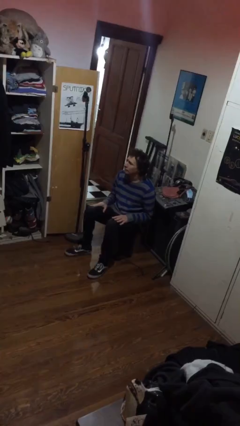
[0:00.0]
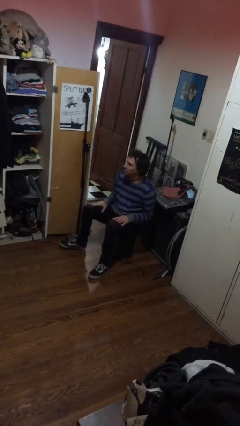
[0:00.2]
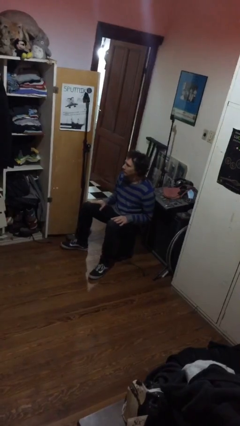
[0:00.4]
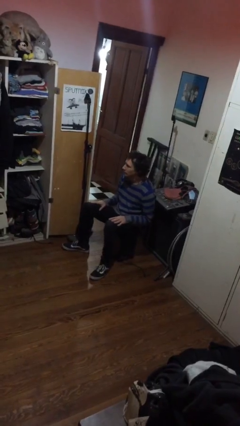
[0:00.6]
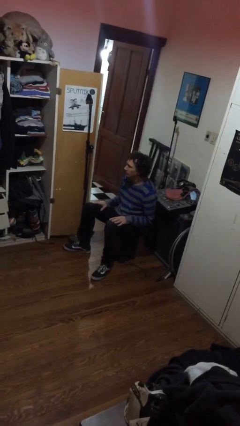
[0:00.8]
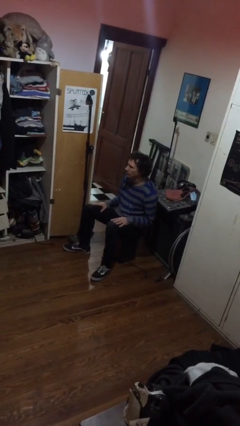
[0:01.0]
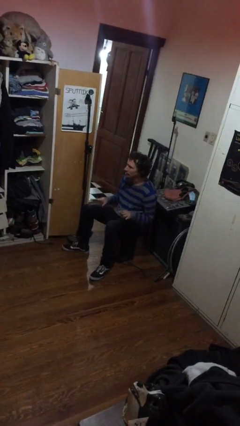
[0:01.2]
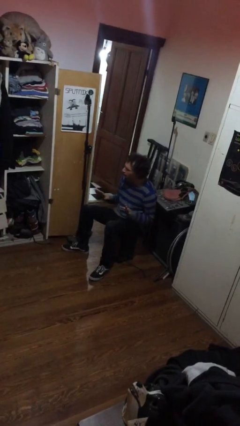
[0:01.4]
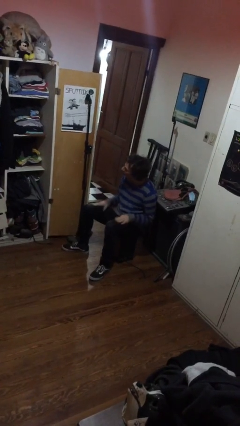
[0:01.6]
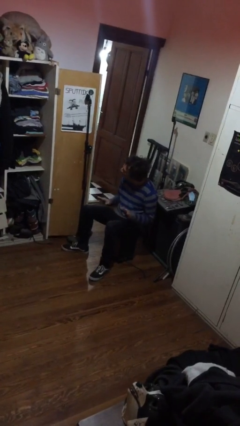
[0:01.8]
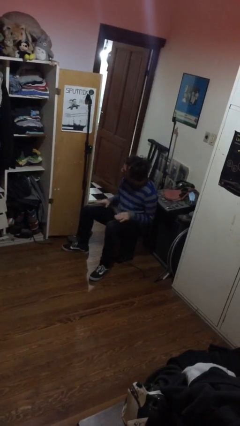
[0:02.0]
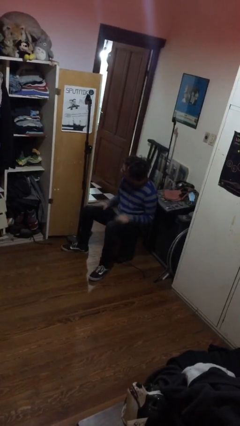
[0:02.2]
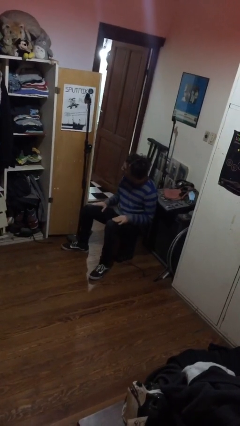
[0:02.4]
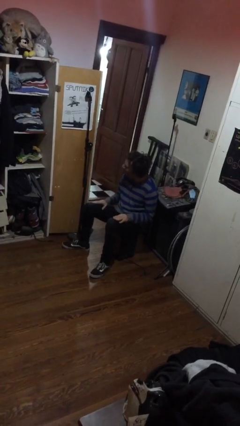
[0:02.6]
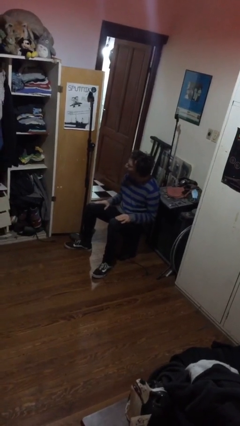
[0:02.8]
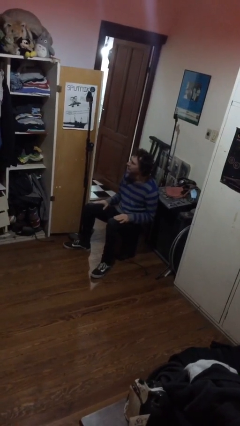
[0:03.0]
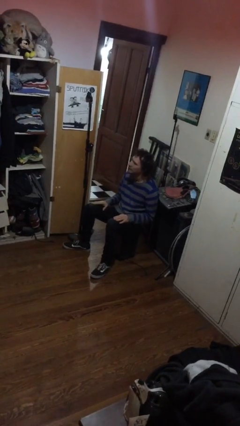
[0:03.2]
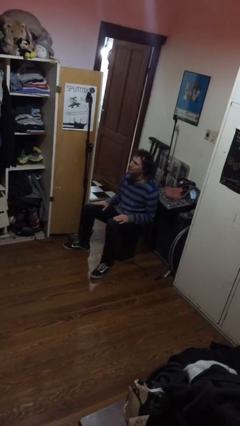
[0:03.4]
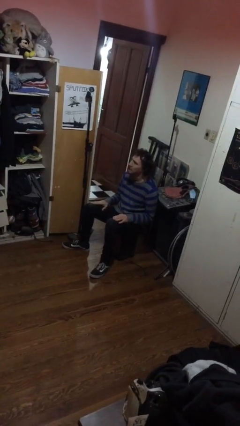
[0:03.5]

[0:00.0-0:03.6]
person slaps hands on thighs

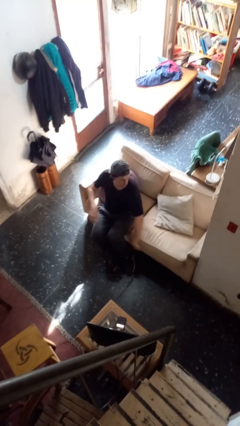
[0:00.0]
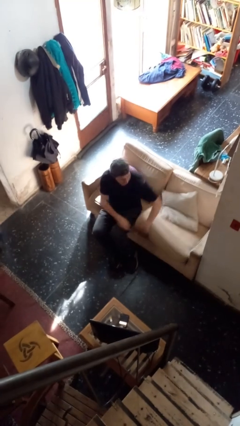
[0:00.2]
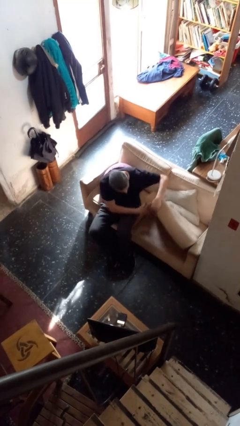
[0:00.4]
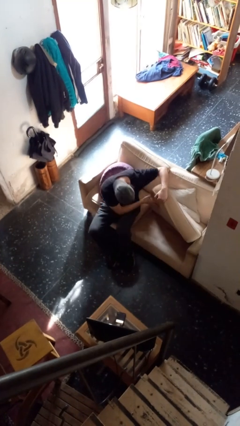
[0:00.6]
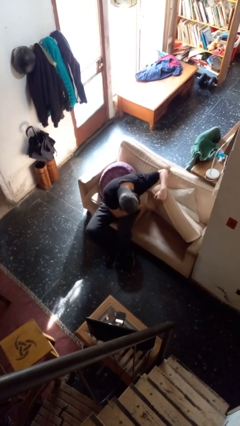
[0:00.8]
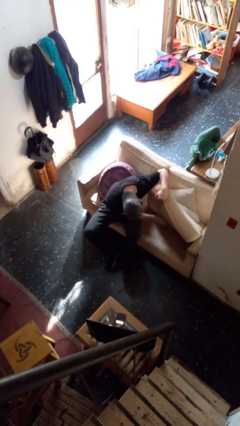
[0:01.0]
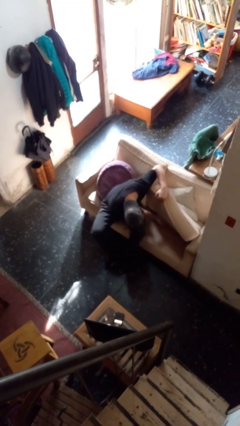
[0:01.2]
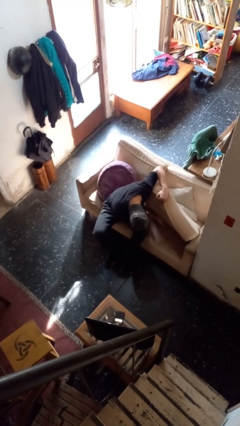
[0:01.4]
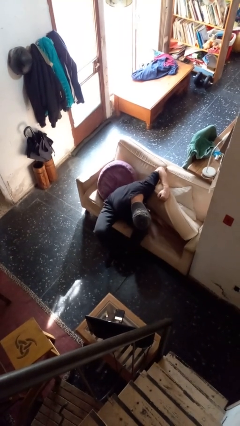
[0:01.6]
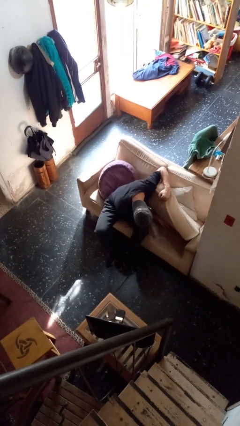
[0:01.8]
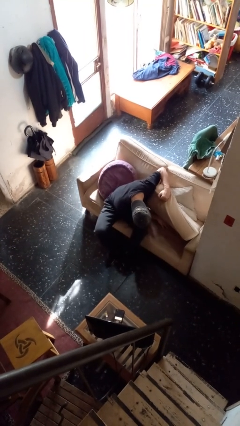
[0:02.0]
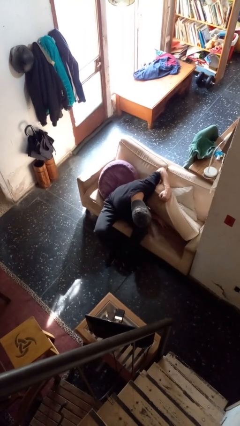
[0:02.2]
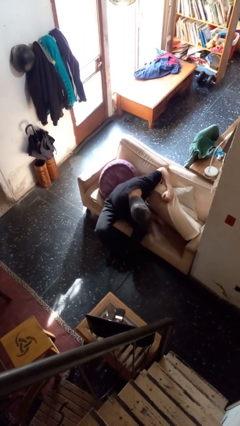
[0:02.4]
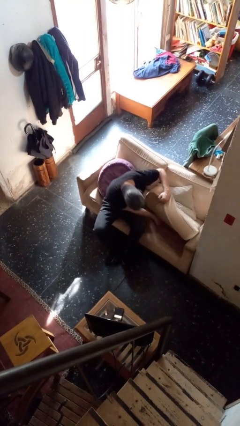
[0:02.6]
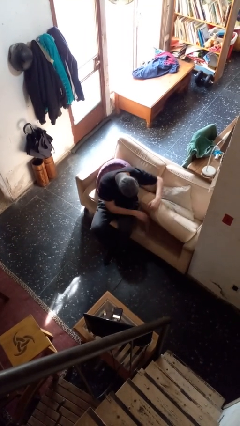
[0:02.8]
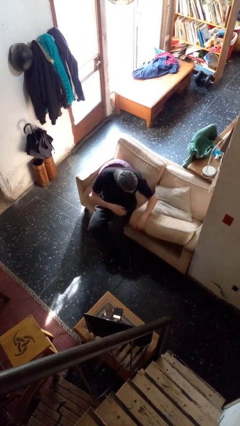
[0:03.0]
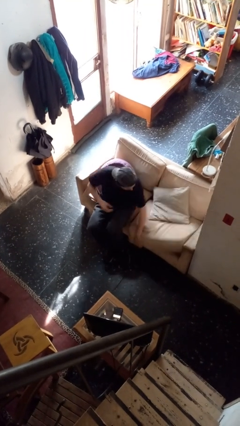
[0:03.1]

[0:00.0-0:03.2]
person searches in couch

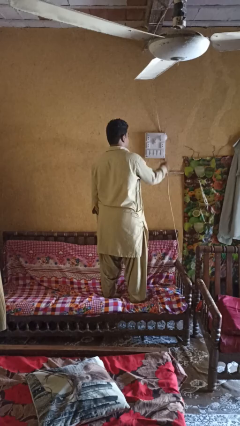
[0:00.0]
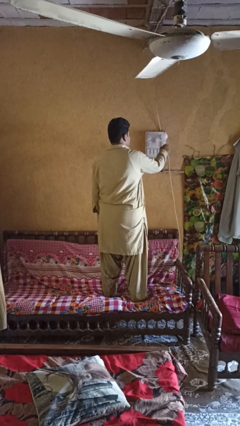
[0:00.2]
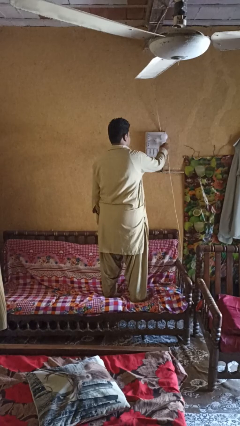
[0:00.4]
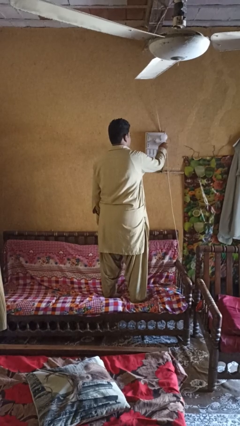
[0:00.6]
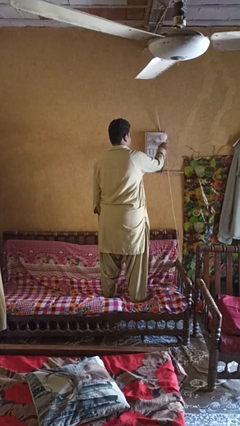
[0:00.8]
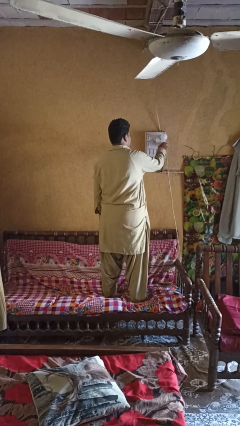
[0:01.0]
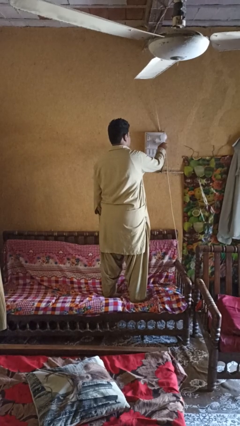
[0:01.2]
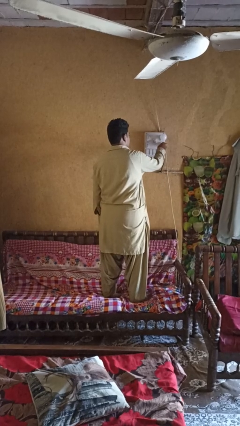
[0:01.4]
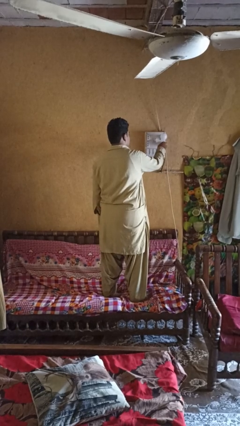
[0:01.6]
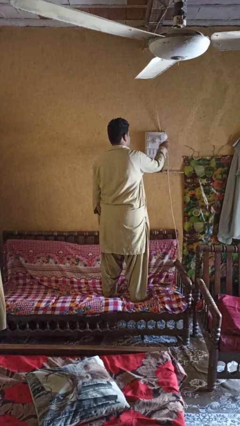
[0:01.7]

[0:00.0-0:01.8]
person plugs into electrical socket

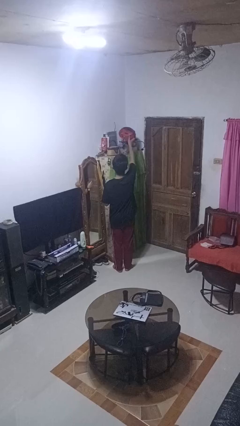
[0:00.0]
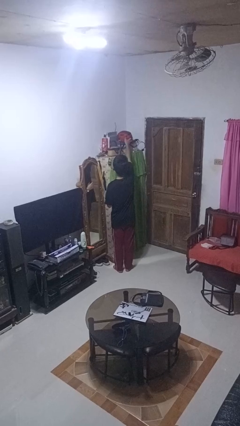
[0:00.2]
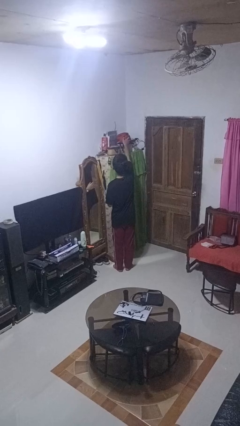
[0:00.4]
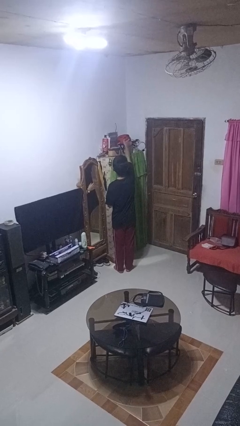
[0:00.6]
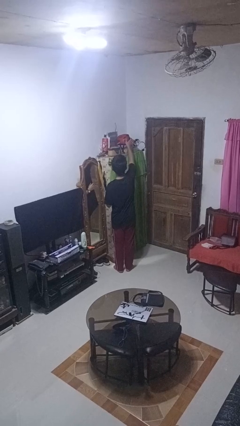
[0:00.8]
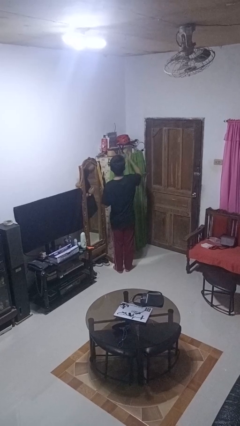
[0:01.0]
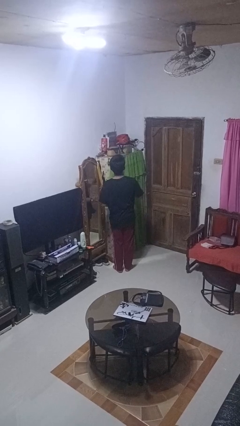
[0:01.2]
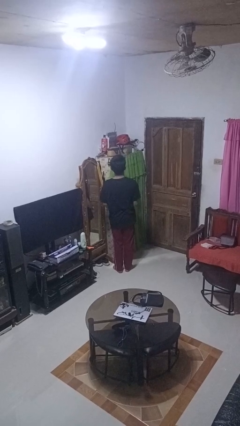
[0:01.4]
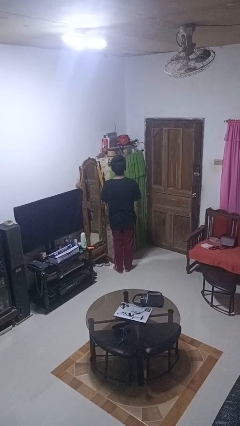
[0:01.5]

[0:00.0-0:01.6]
person puts down object on shelf

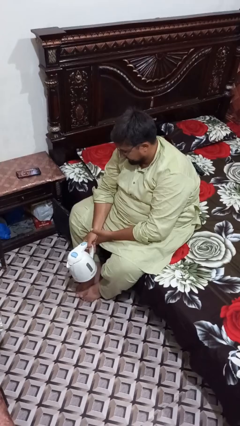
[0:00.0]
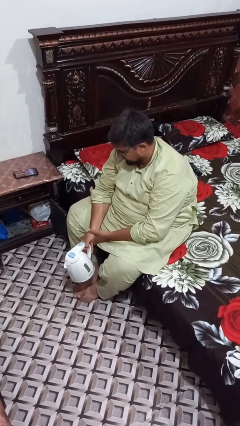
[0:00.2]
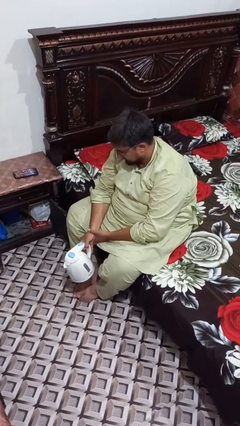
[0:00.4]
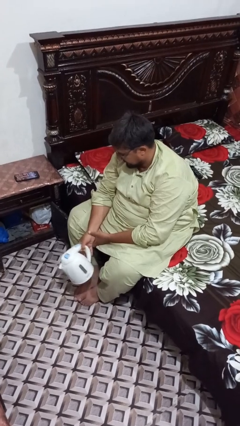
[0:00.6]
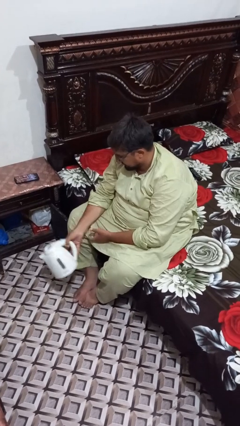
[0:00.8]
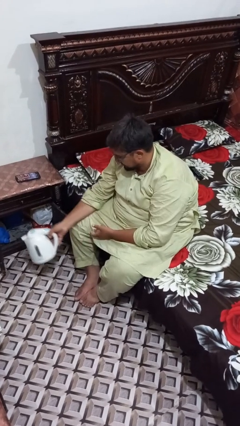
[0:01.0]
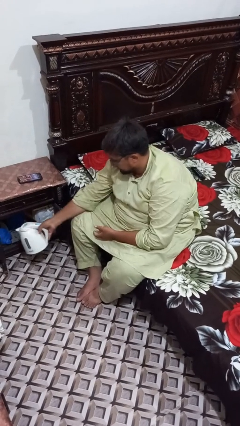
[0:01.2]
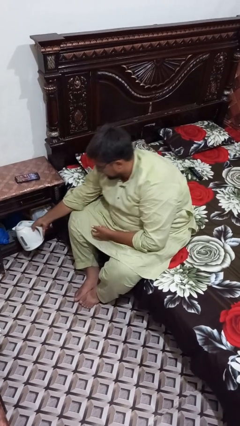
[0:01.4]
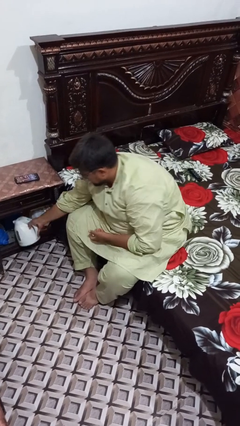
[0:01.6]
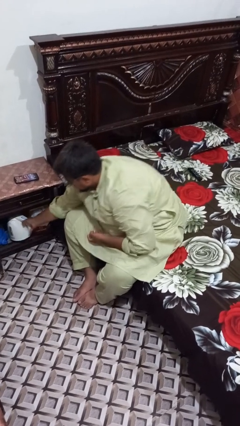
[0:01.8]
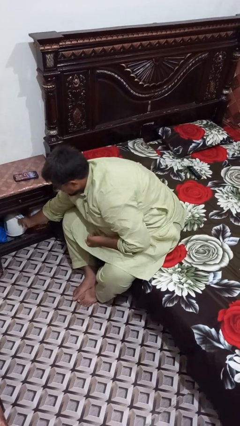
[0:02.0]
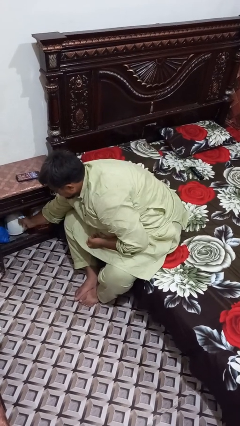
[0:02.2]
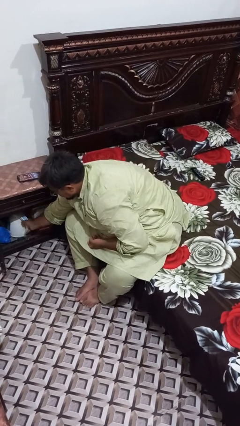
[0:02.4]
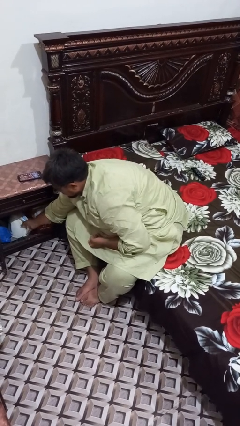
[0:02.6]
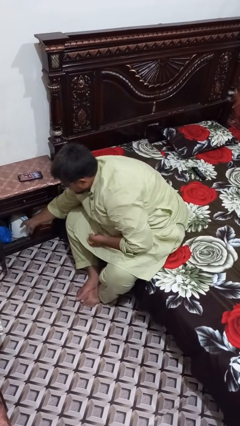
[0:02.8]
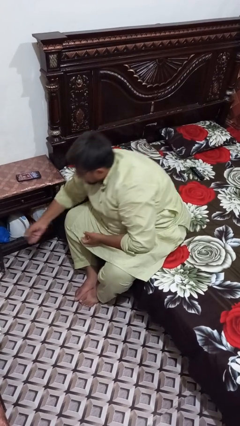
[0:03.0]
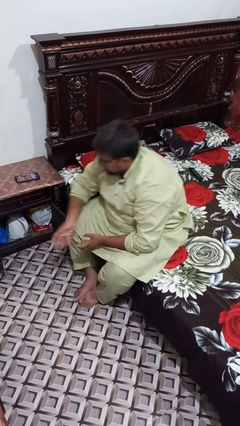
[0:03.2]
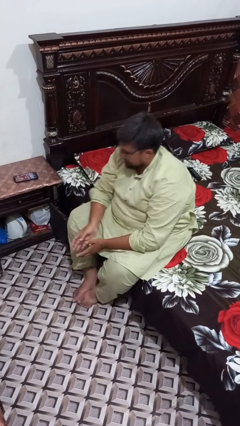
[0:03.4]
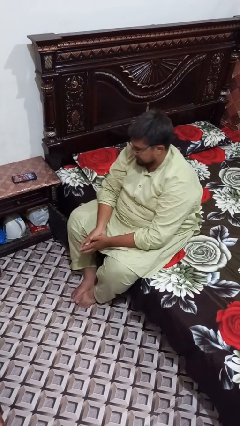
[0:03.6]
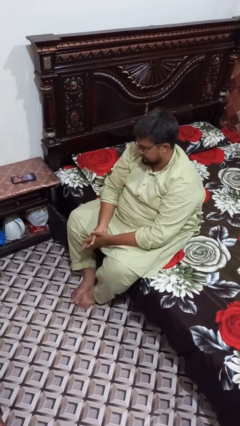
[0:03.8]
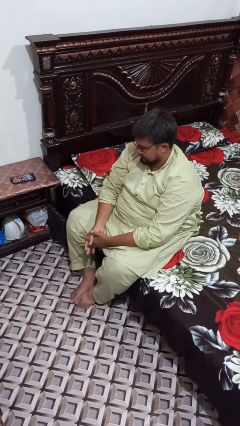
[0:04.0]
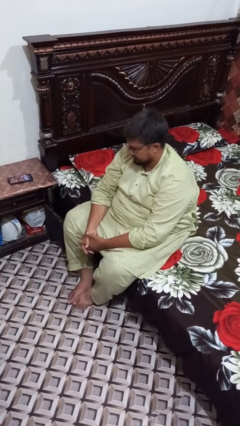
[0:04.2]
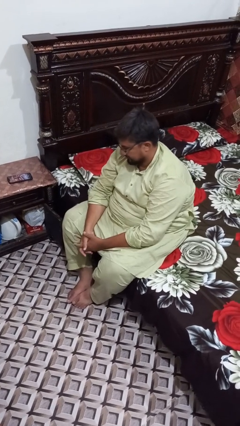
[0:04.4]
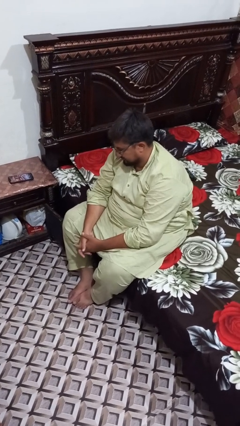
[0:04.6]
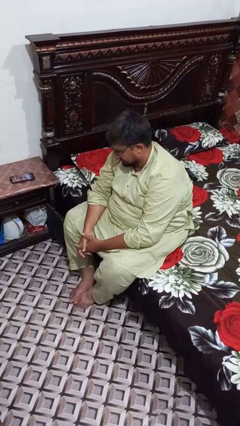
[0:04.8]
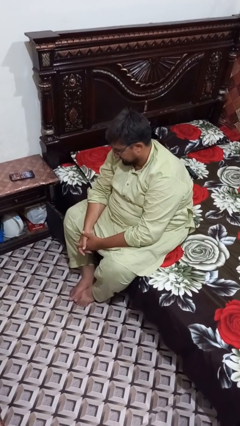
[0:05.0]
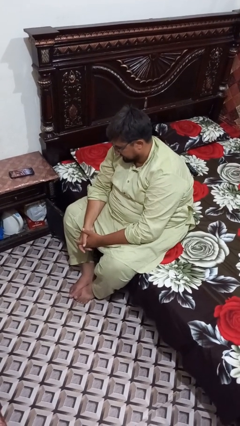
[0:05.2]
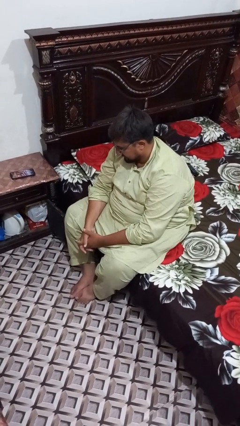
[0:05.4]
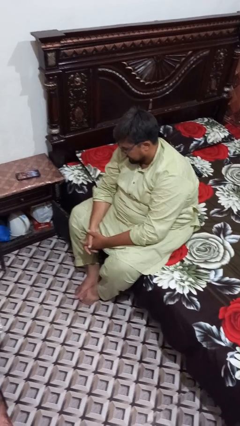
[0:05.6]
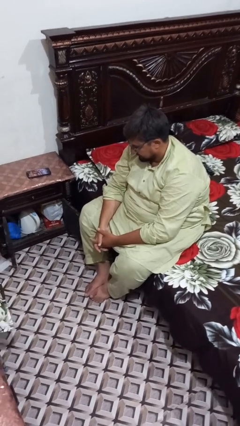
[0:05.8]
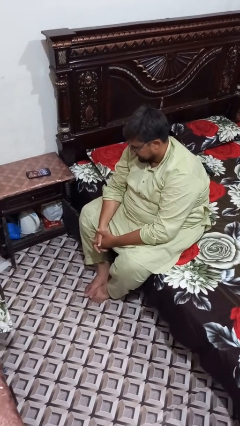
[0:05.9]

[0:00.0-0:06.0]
person puts down object into cabinet

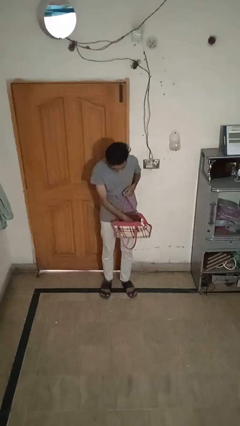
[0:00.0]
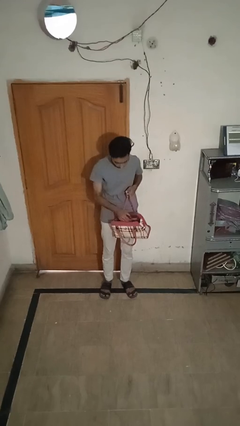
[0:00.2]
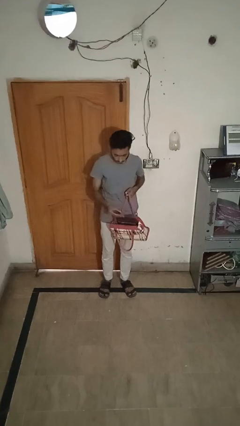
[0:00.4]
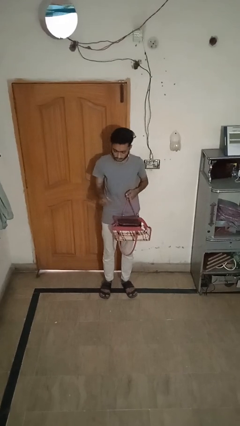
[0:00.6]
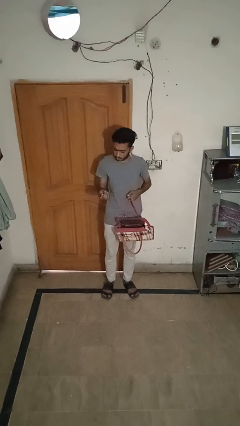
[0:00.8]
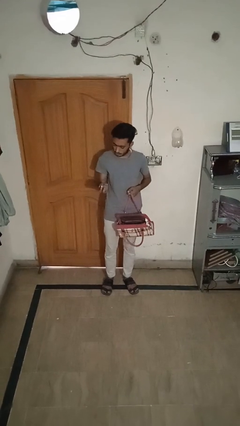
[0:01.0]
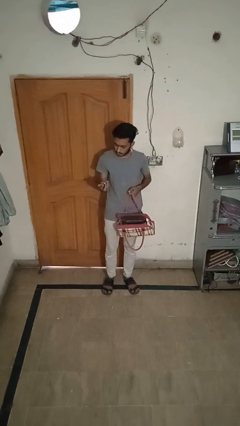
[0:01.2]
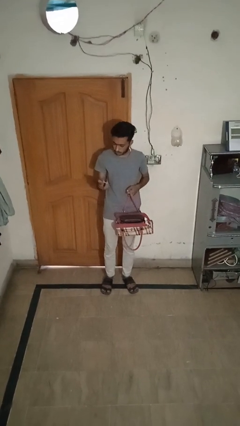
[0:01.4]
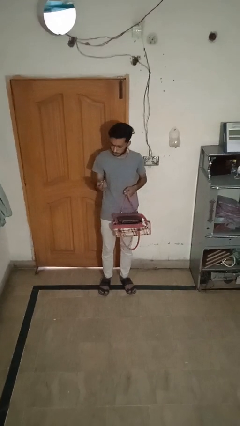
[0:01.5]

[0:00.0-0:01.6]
person takes object from purse
